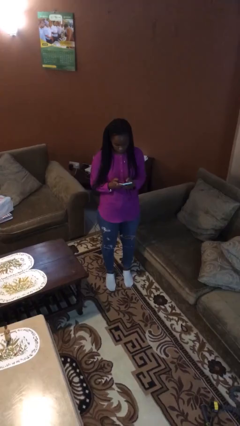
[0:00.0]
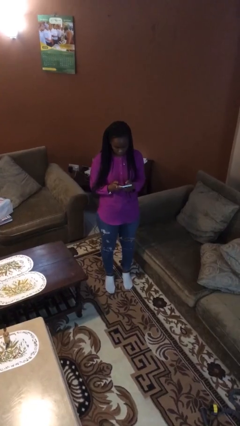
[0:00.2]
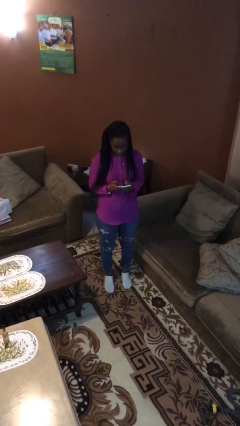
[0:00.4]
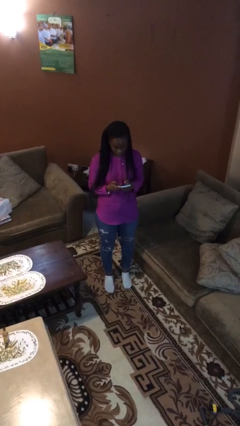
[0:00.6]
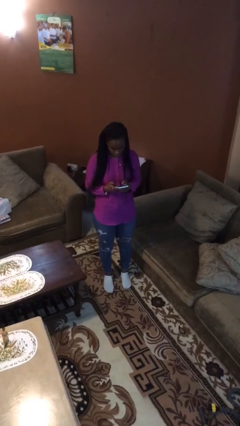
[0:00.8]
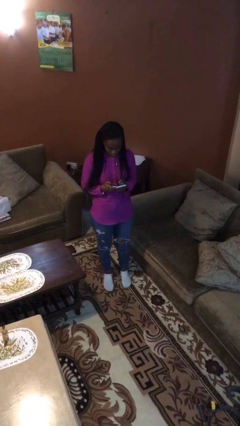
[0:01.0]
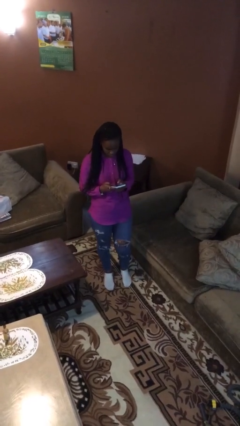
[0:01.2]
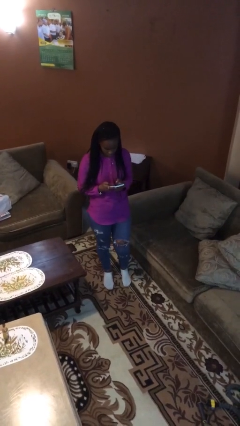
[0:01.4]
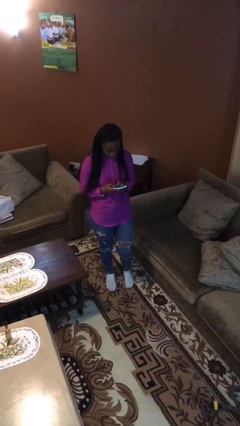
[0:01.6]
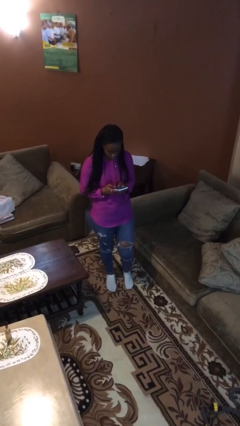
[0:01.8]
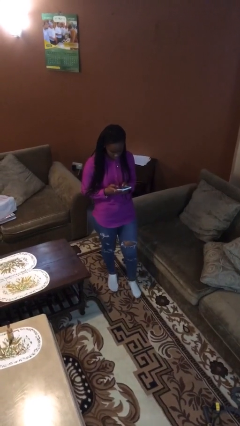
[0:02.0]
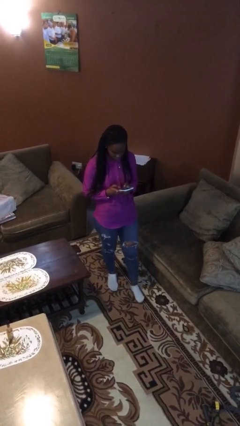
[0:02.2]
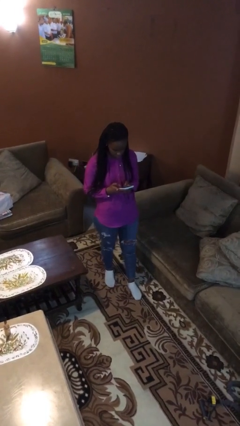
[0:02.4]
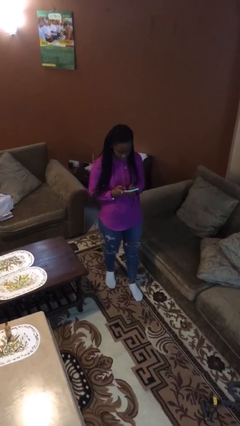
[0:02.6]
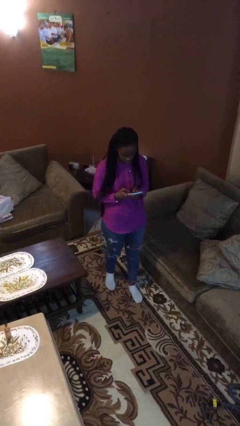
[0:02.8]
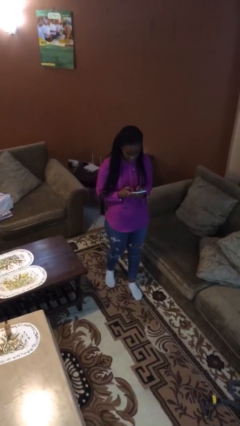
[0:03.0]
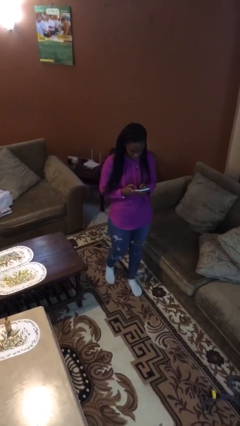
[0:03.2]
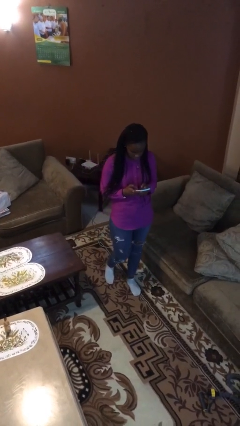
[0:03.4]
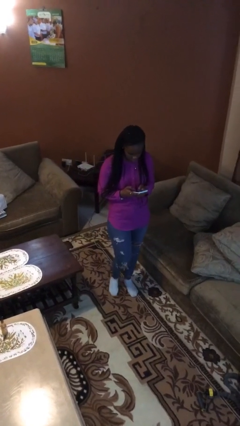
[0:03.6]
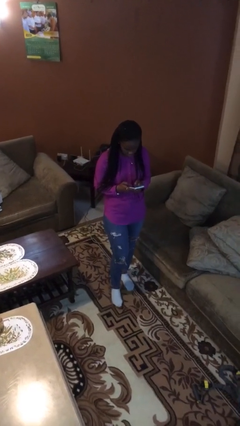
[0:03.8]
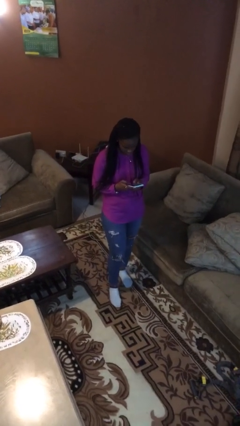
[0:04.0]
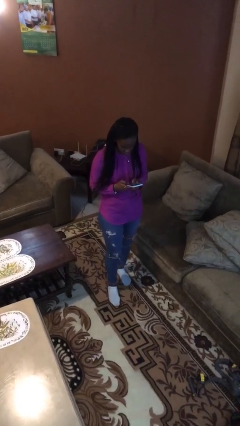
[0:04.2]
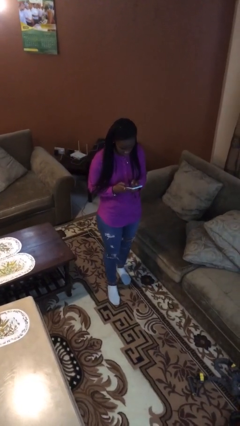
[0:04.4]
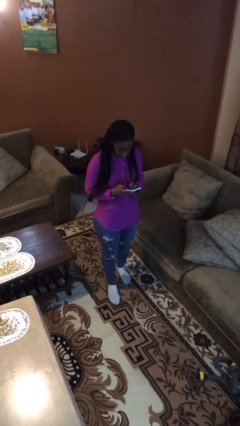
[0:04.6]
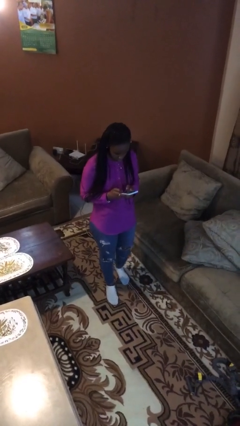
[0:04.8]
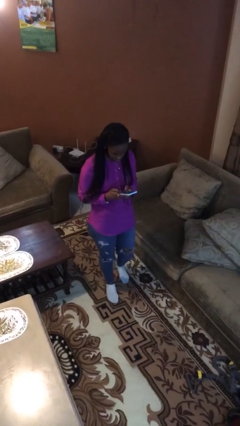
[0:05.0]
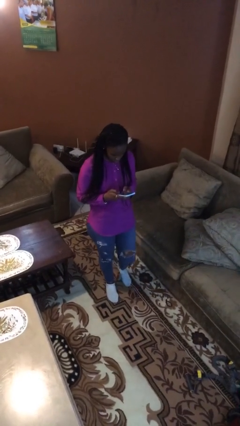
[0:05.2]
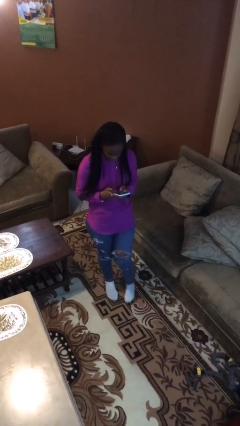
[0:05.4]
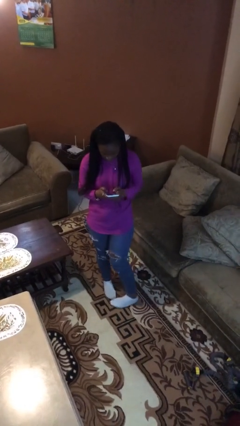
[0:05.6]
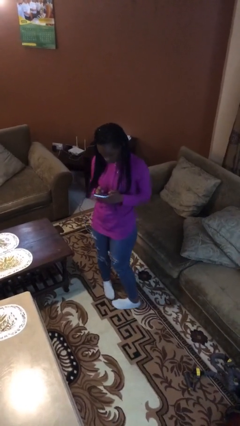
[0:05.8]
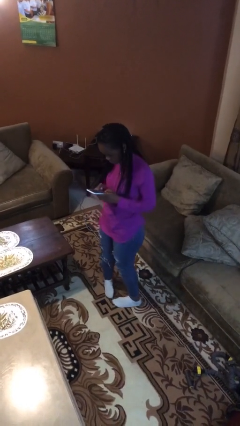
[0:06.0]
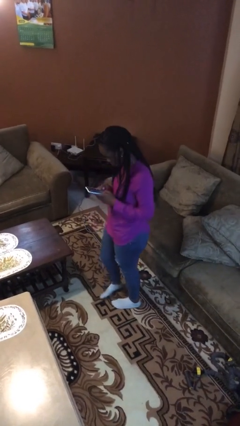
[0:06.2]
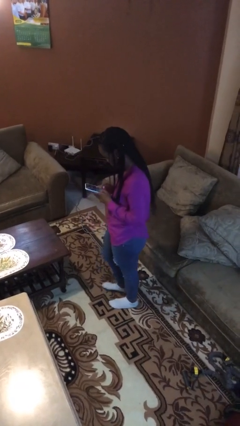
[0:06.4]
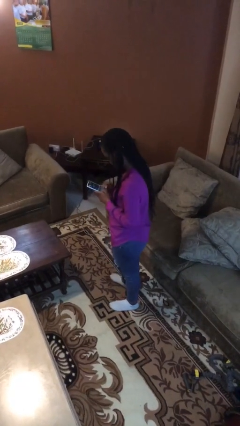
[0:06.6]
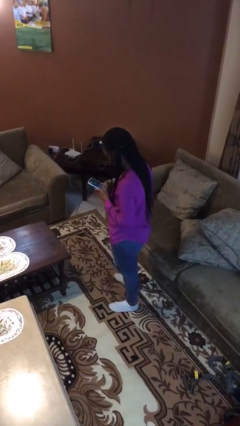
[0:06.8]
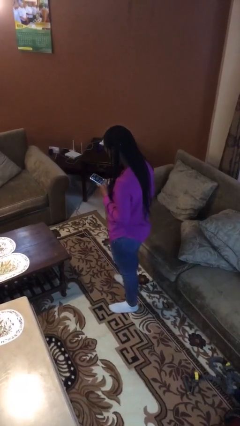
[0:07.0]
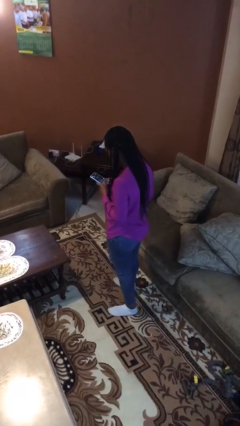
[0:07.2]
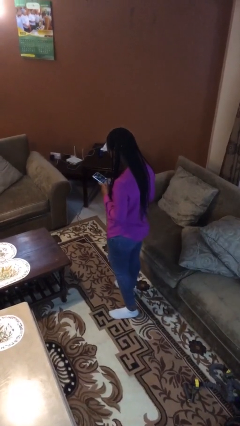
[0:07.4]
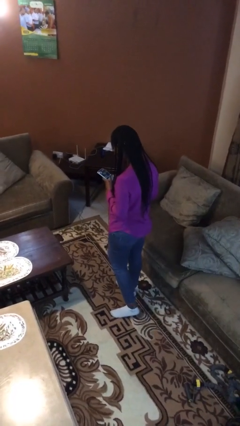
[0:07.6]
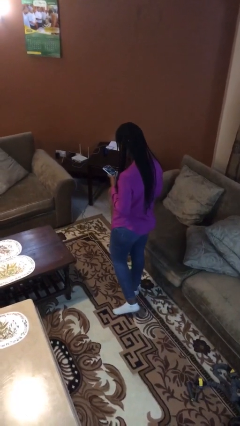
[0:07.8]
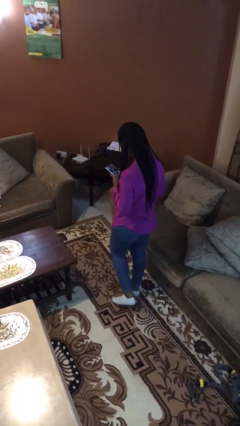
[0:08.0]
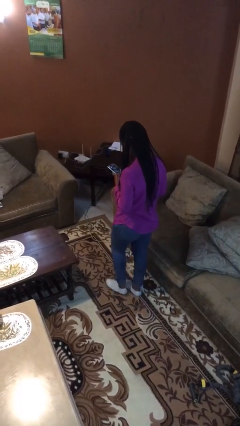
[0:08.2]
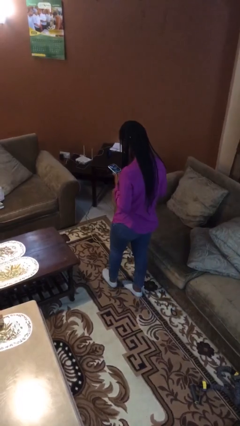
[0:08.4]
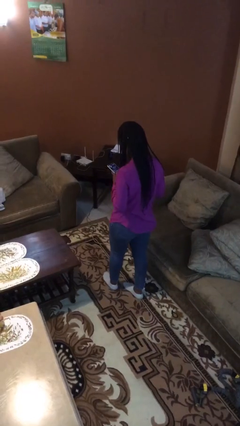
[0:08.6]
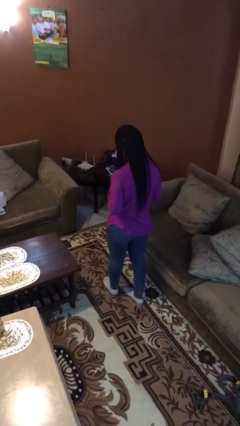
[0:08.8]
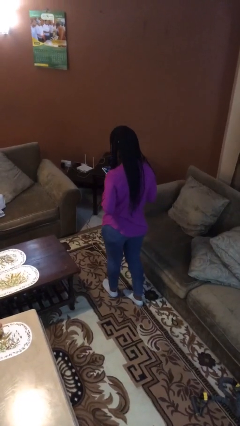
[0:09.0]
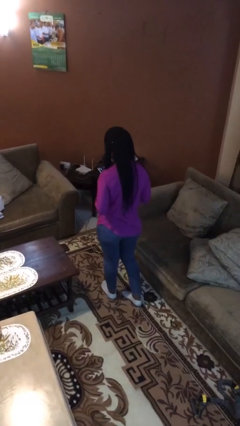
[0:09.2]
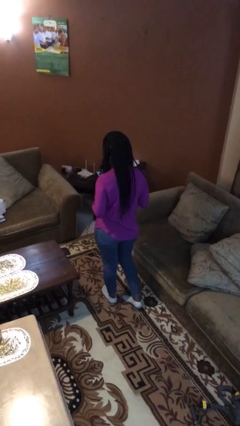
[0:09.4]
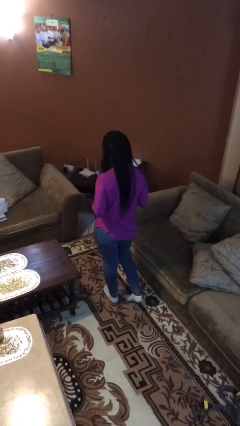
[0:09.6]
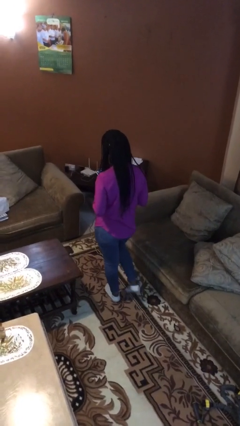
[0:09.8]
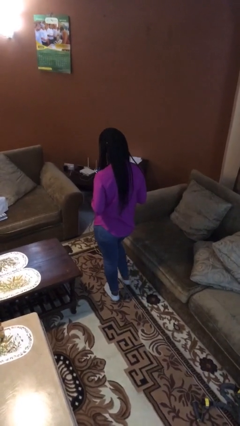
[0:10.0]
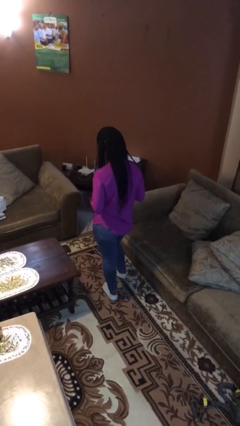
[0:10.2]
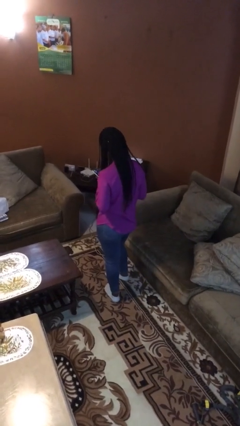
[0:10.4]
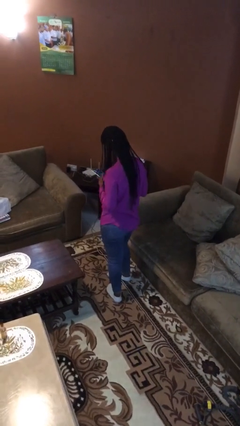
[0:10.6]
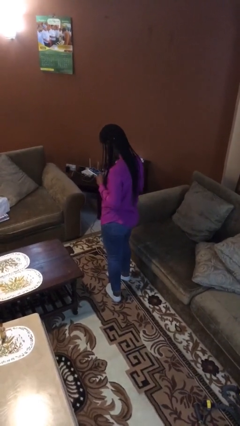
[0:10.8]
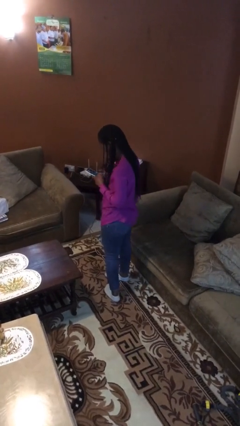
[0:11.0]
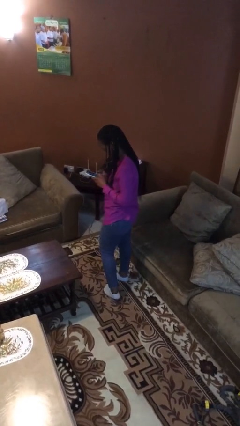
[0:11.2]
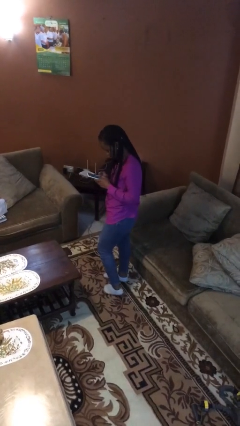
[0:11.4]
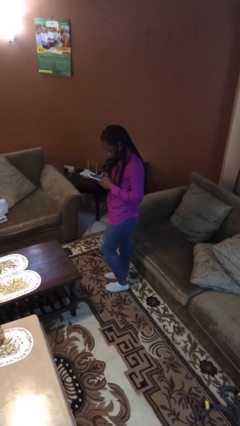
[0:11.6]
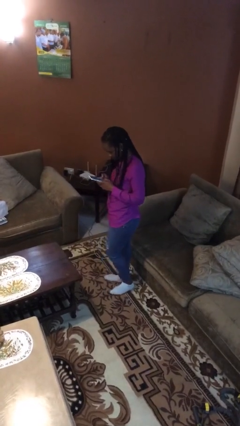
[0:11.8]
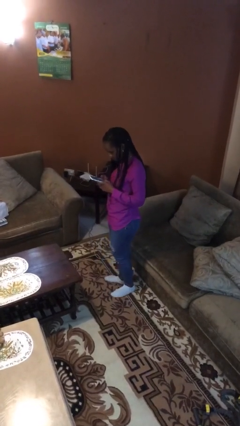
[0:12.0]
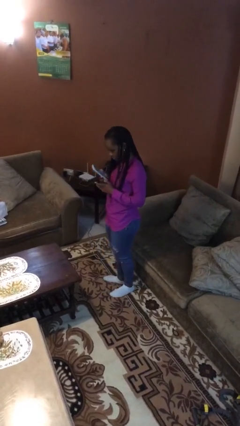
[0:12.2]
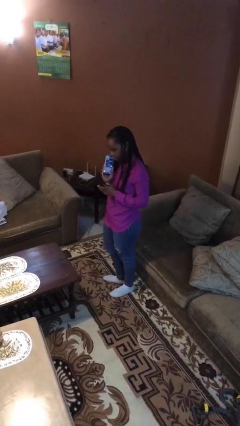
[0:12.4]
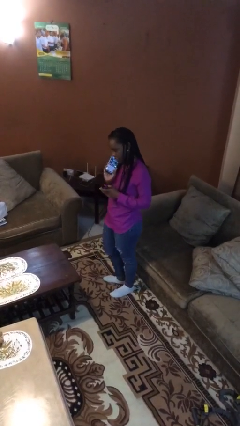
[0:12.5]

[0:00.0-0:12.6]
person texts on phone

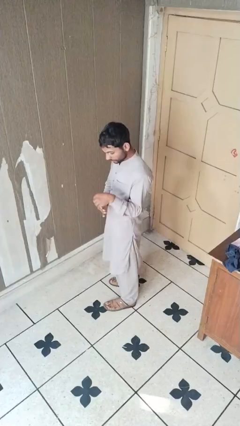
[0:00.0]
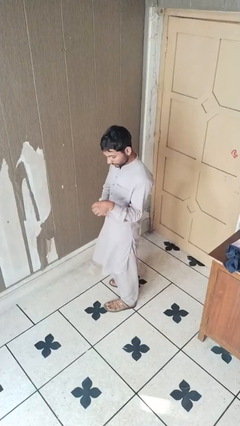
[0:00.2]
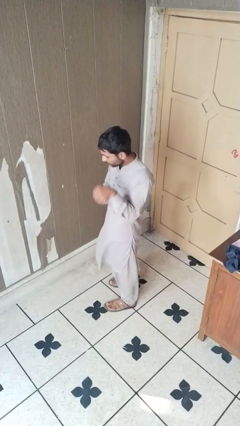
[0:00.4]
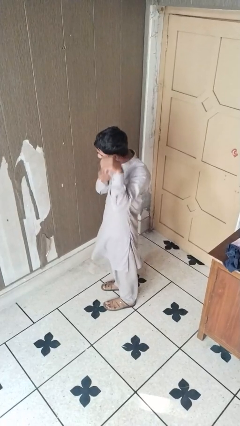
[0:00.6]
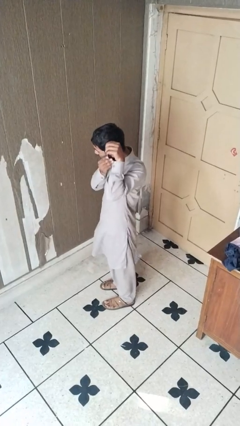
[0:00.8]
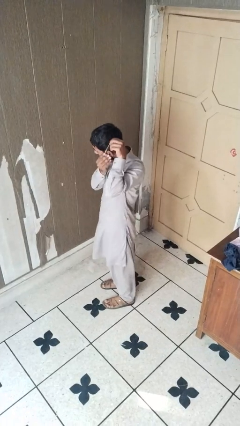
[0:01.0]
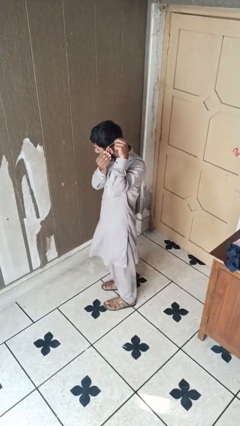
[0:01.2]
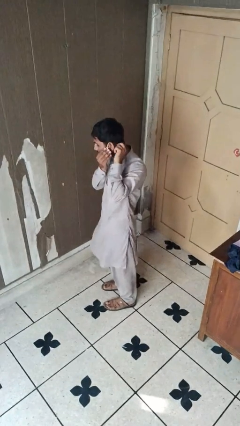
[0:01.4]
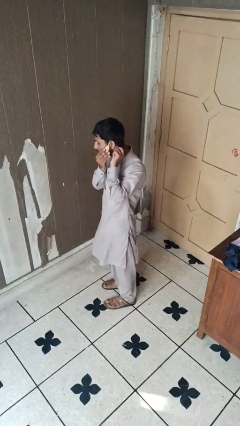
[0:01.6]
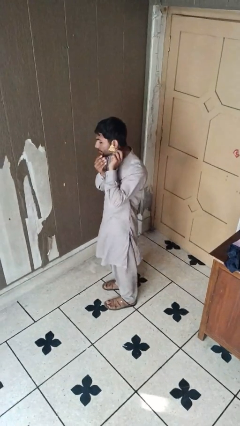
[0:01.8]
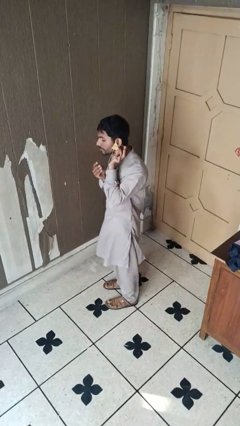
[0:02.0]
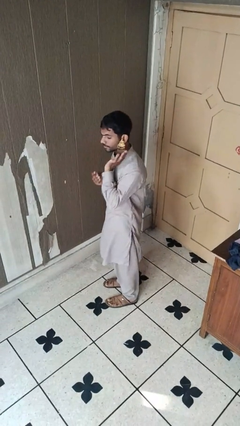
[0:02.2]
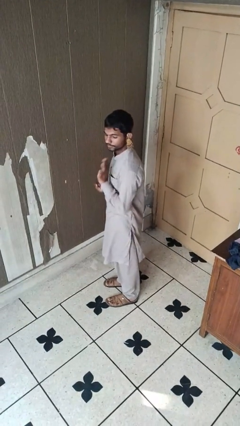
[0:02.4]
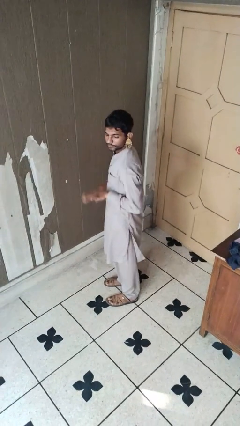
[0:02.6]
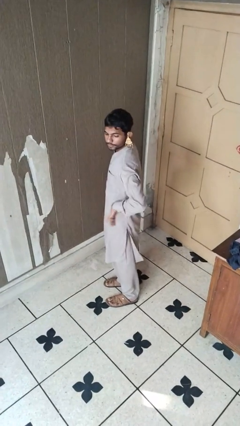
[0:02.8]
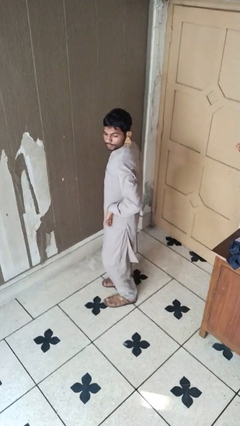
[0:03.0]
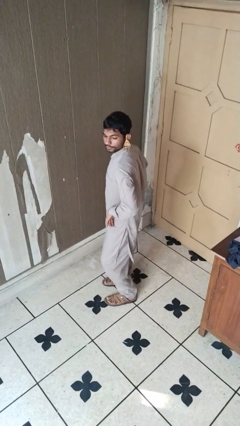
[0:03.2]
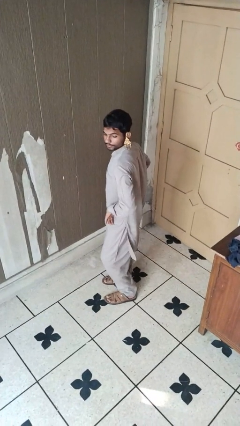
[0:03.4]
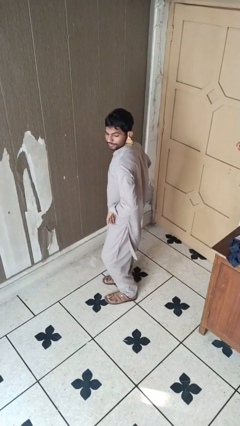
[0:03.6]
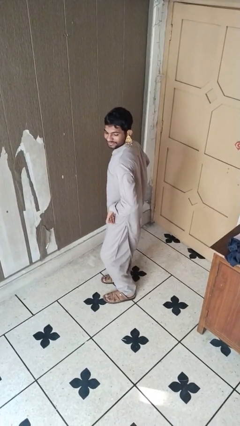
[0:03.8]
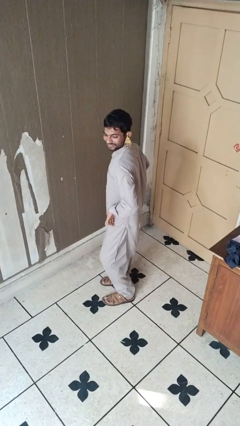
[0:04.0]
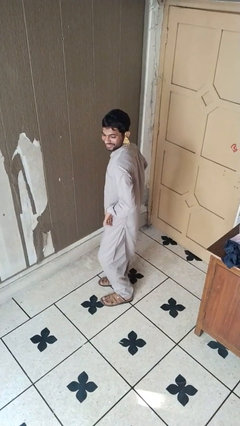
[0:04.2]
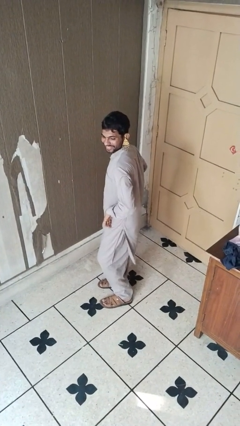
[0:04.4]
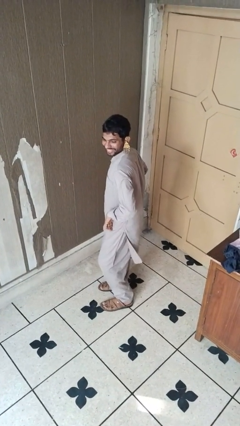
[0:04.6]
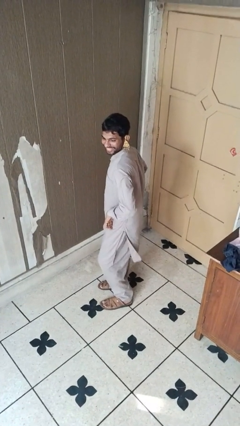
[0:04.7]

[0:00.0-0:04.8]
person puts on earrings

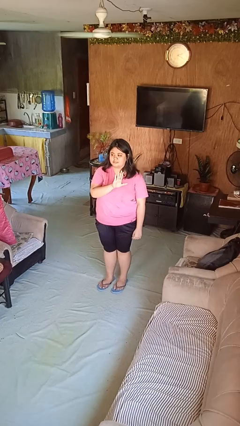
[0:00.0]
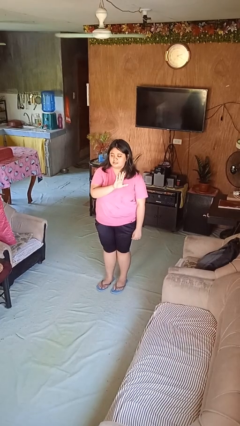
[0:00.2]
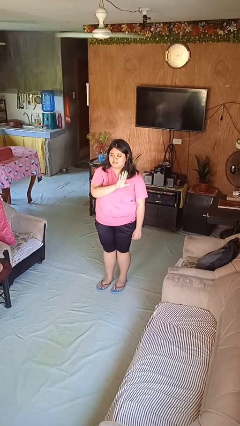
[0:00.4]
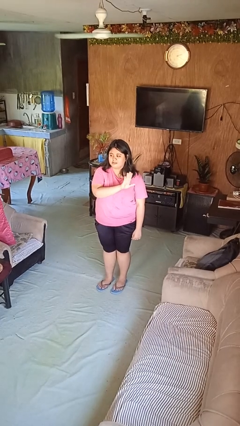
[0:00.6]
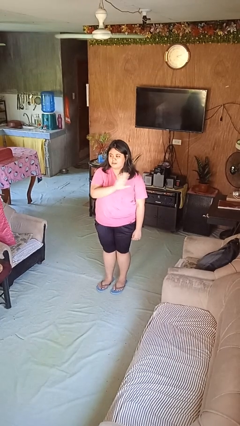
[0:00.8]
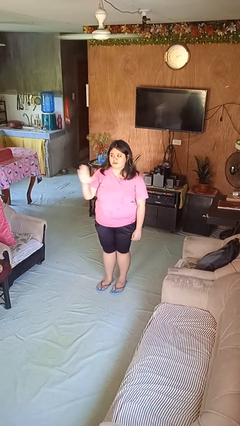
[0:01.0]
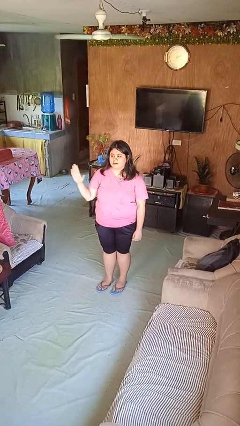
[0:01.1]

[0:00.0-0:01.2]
person gestures swipe right
